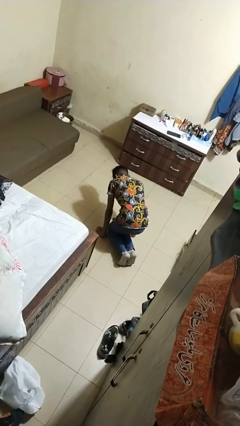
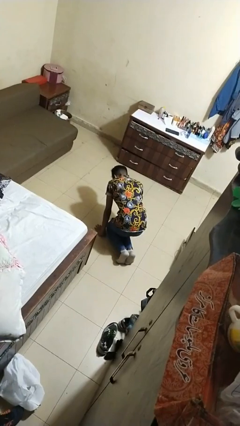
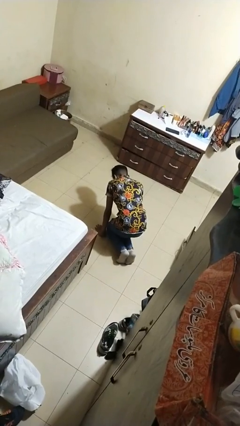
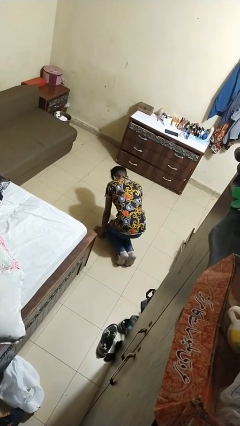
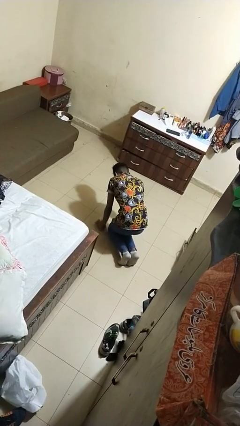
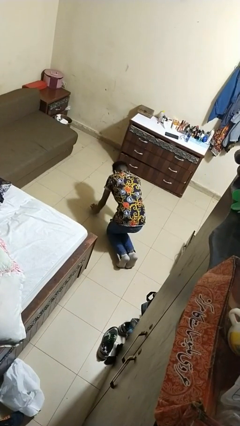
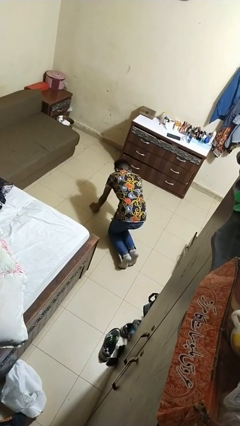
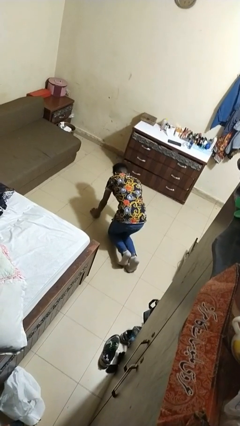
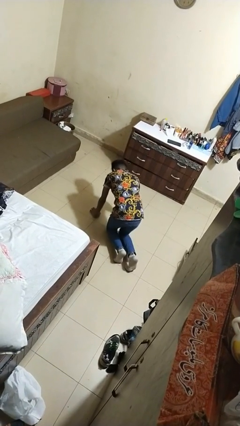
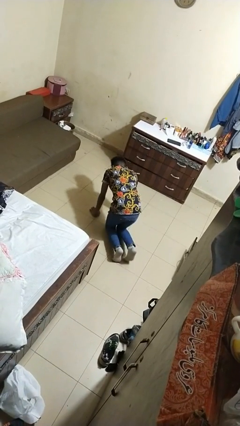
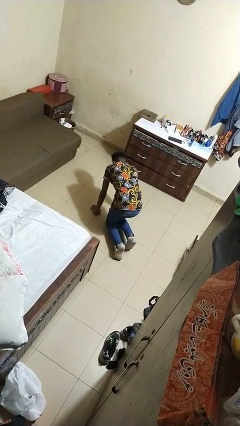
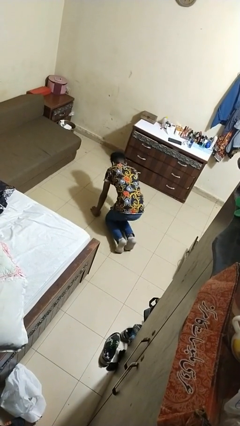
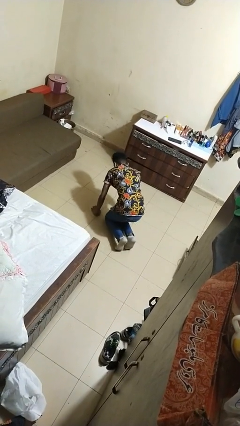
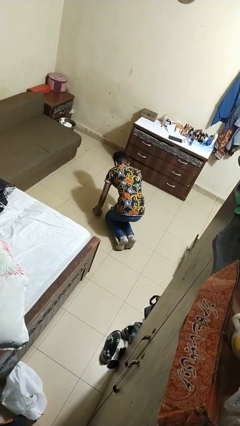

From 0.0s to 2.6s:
person crawls

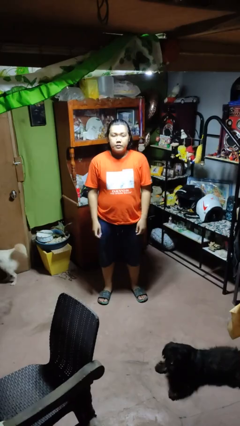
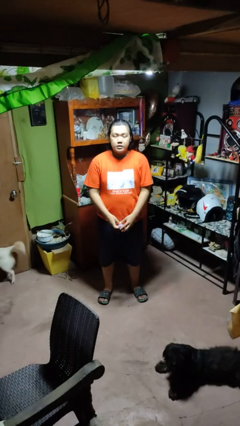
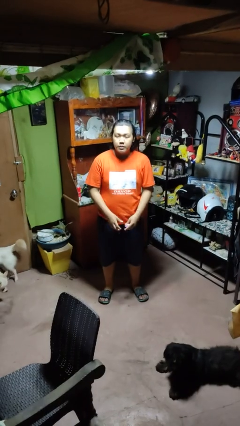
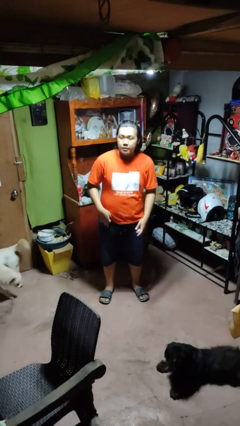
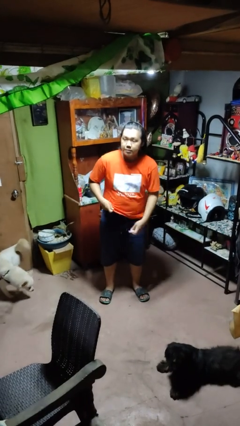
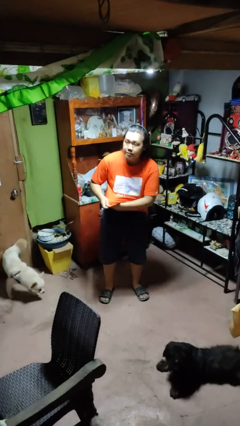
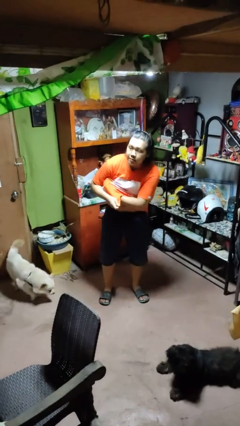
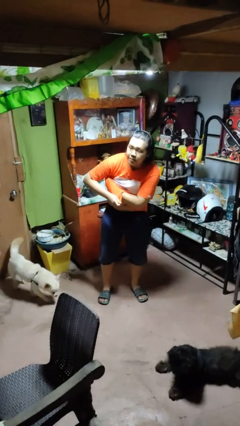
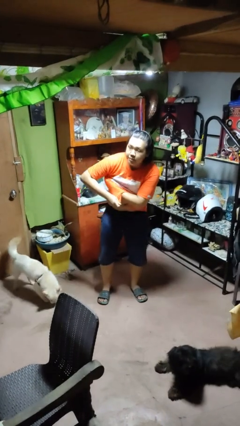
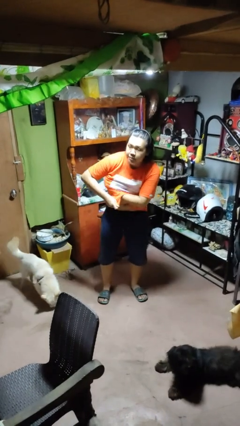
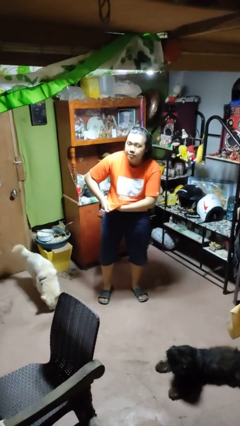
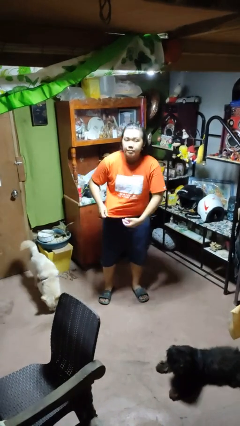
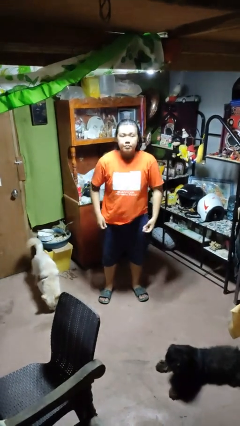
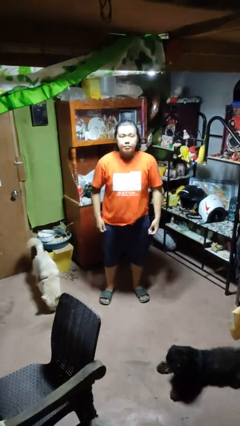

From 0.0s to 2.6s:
person applies deodorant

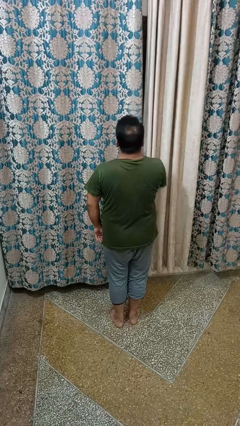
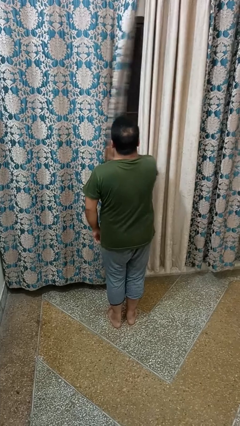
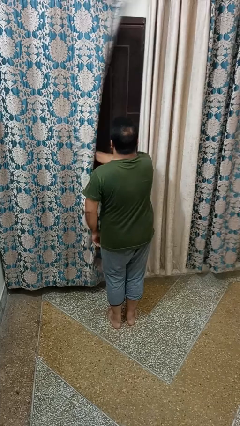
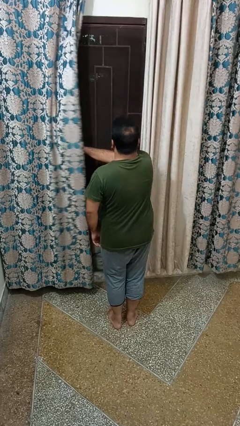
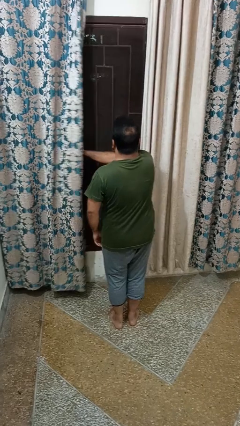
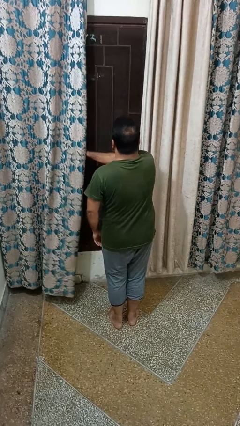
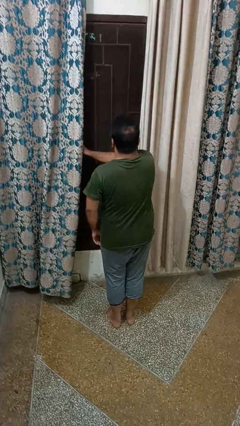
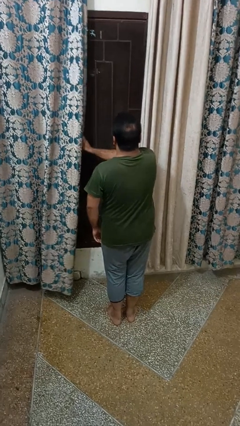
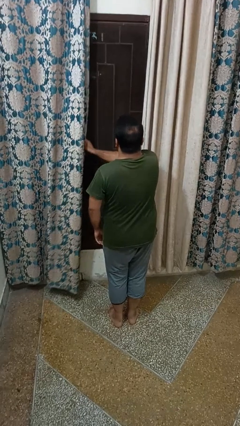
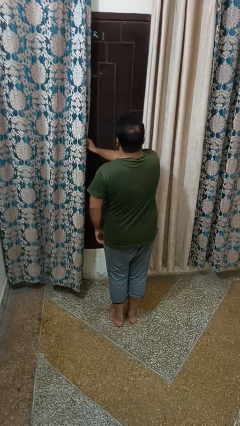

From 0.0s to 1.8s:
person opens curtains

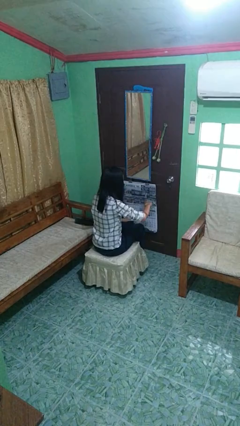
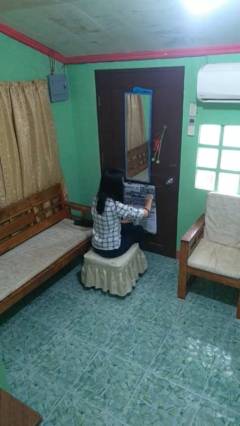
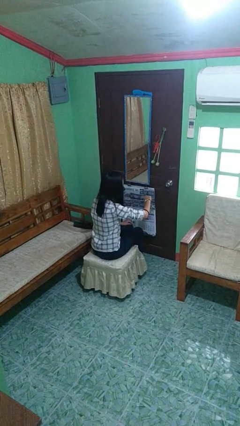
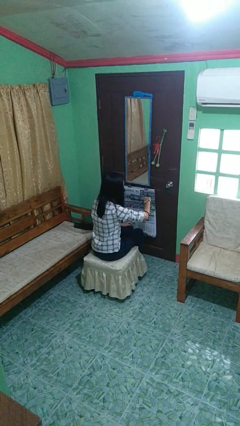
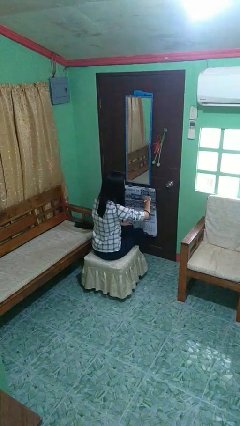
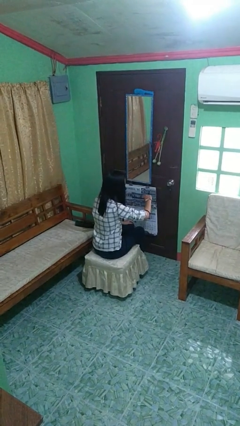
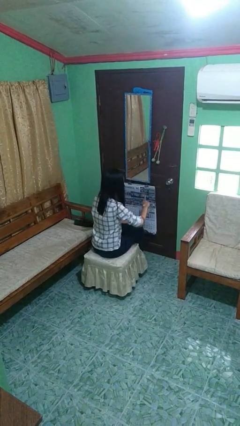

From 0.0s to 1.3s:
person looks at wristwatch

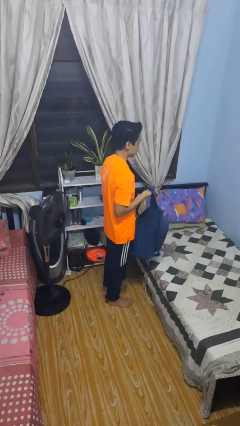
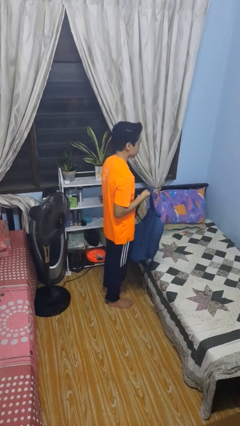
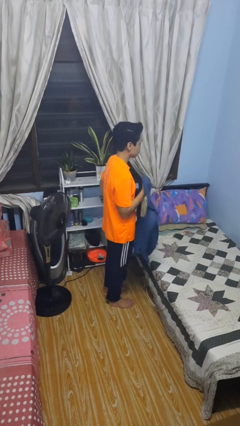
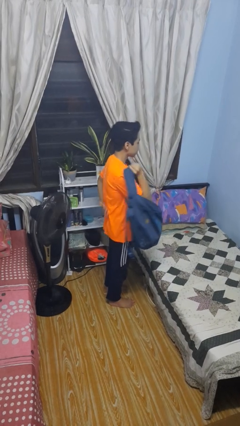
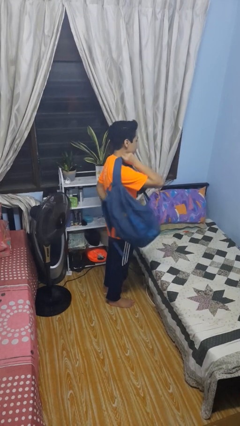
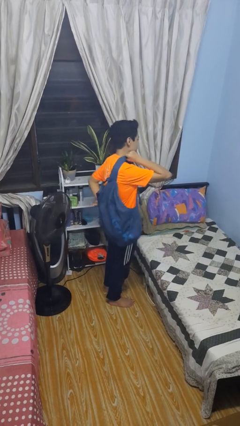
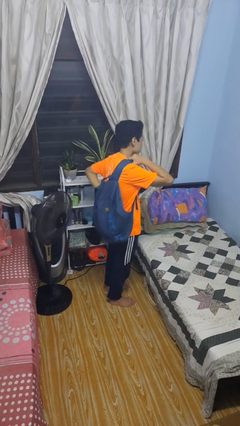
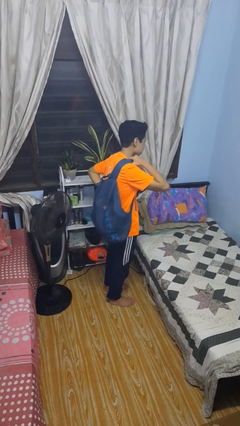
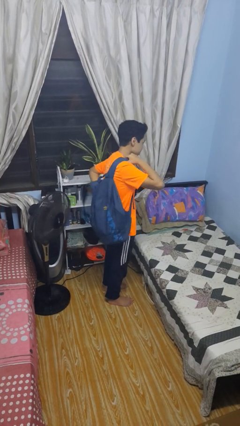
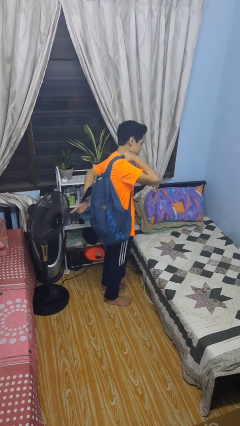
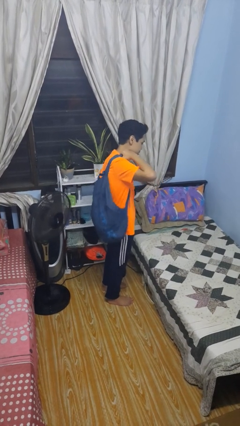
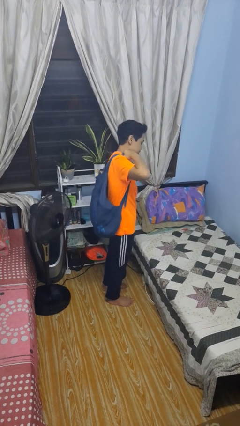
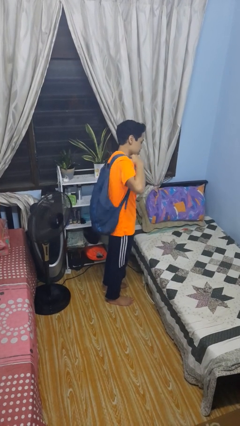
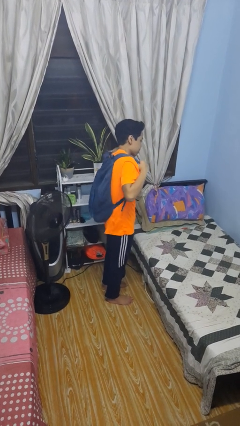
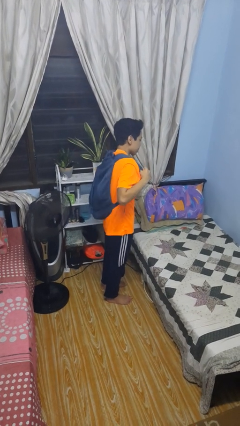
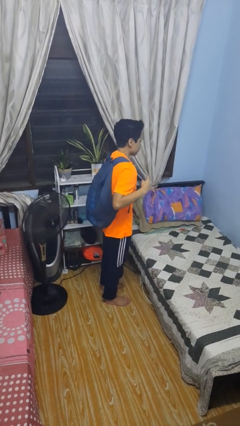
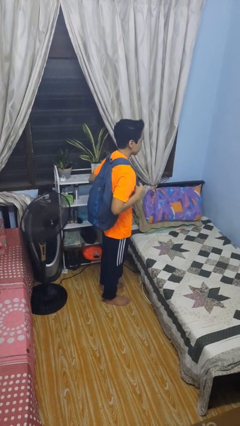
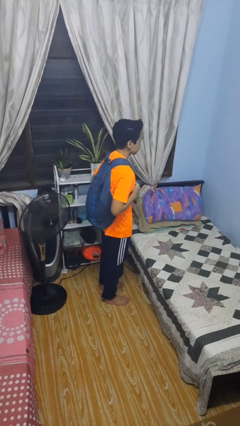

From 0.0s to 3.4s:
person puts on backpack

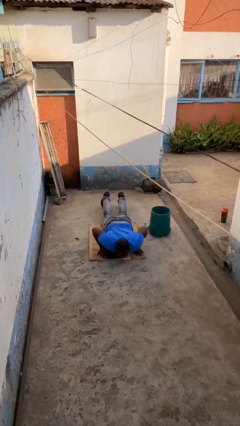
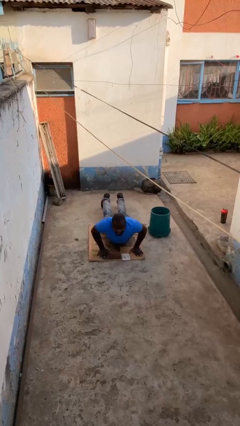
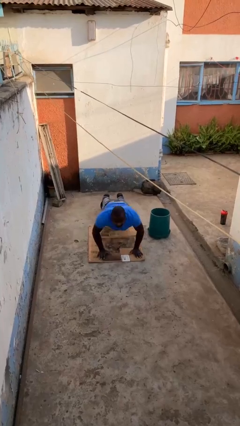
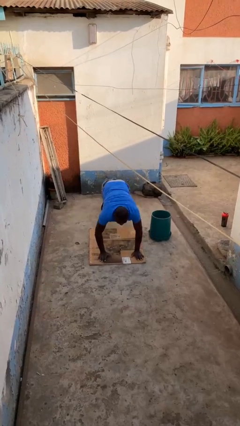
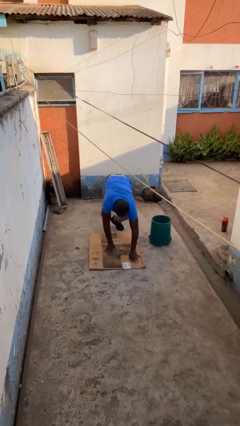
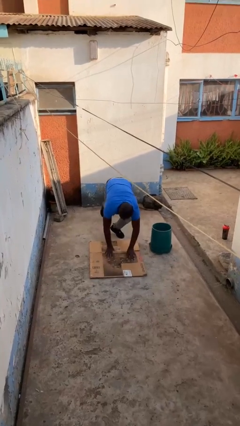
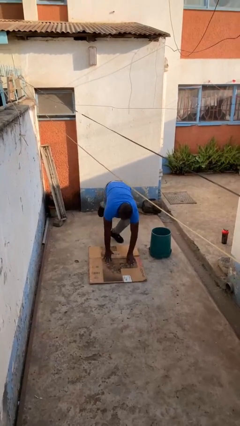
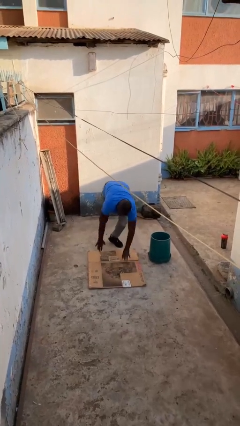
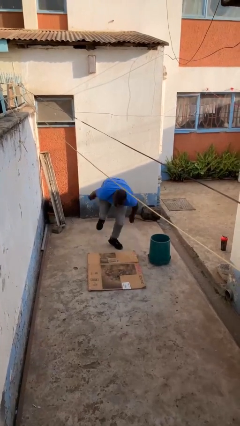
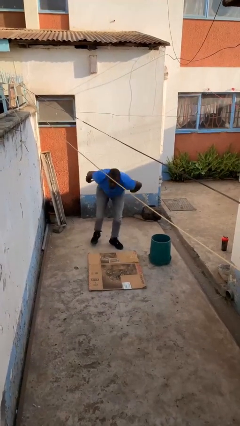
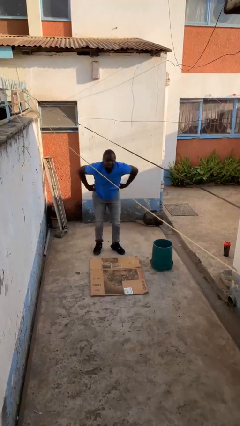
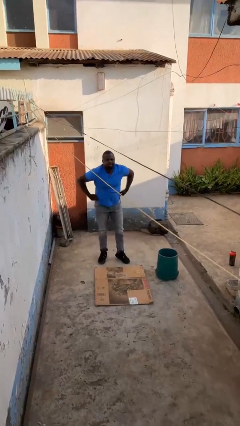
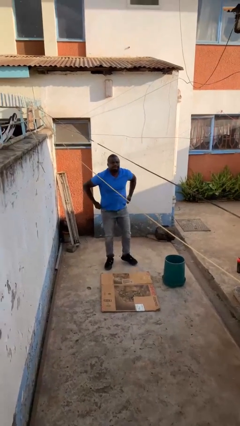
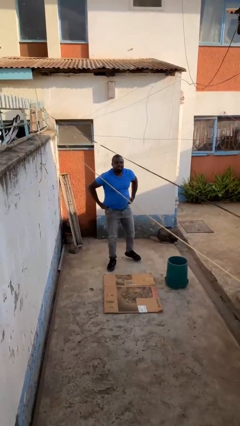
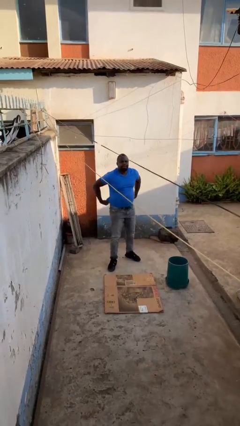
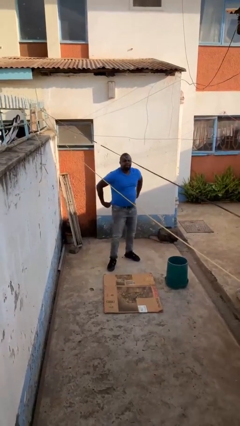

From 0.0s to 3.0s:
person stands up from floor

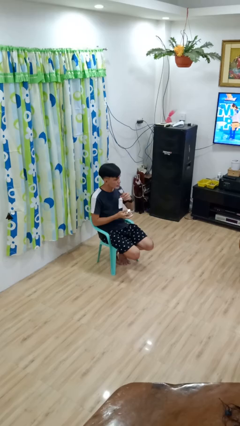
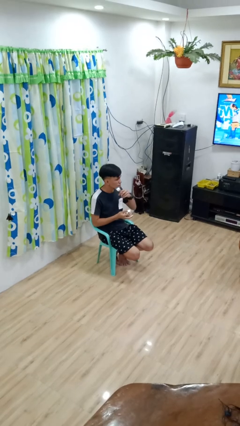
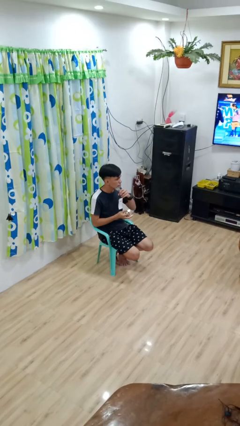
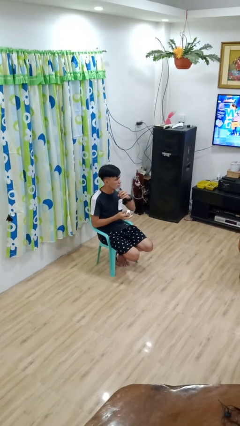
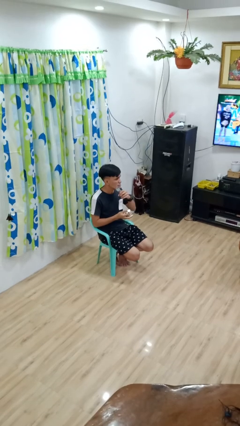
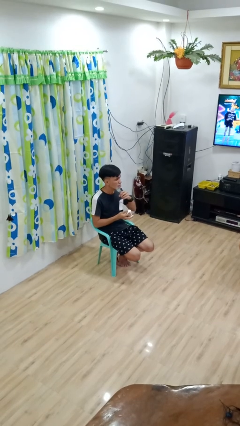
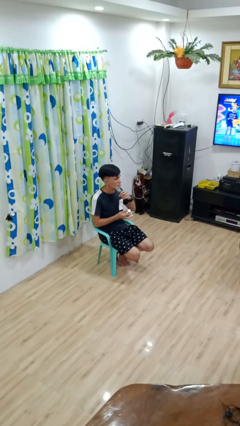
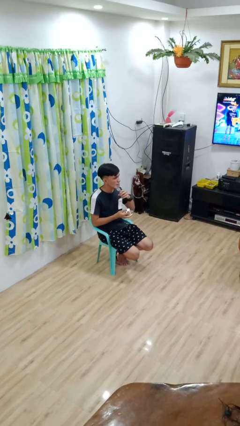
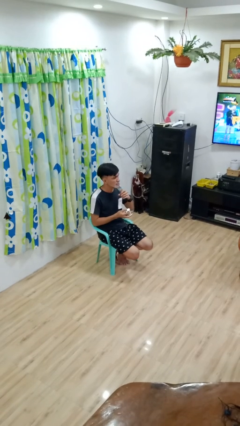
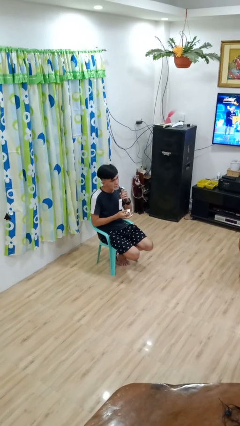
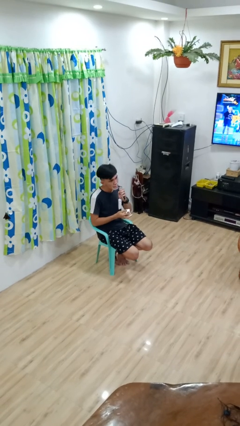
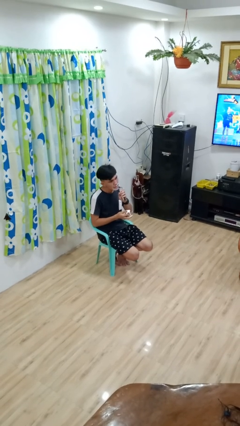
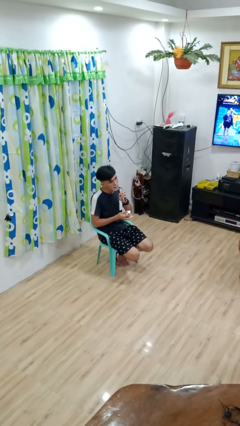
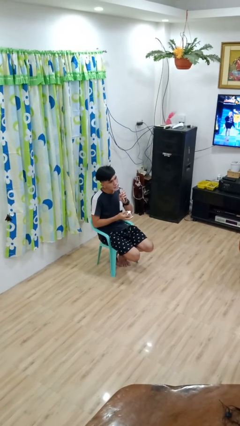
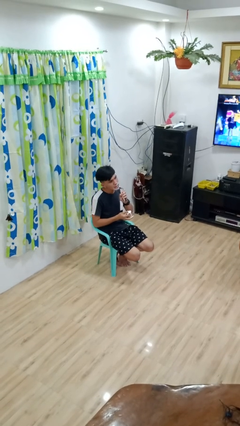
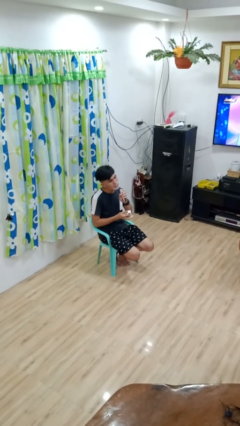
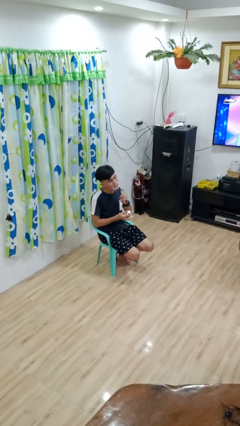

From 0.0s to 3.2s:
person shaves face
